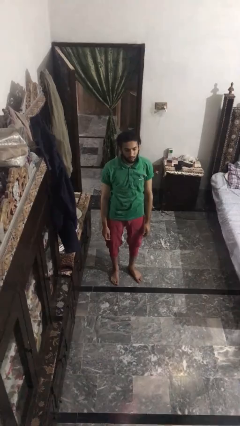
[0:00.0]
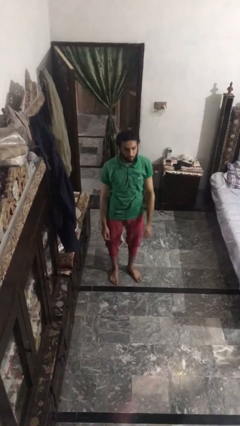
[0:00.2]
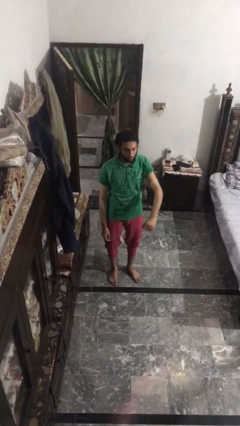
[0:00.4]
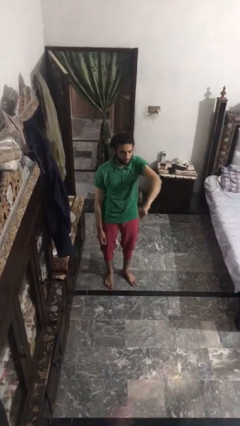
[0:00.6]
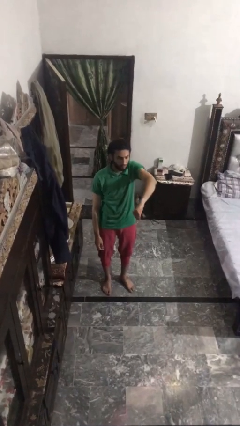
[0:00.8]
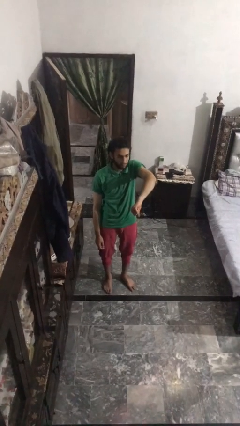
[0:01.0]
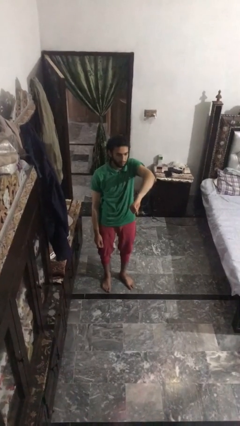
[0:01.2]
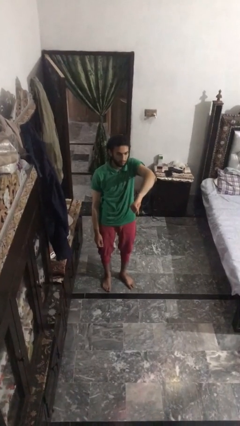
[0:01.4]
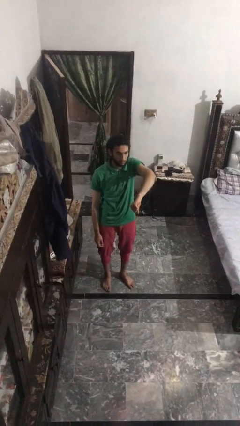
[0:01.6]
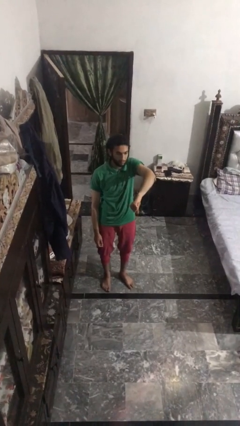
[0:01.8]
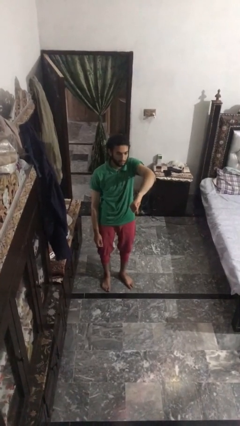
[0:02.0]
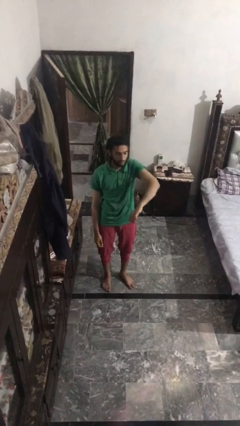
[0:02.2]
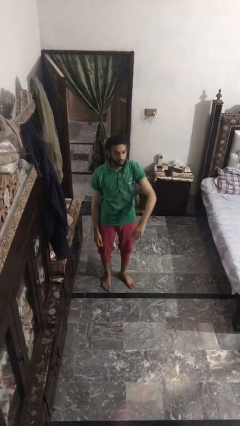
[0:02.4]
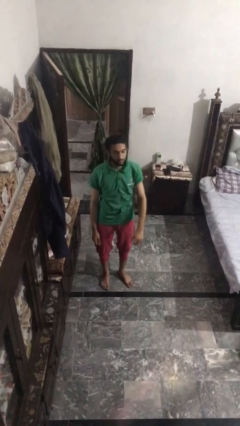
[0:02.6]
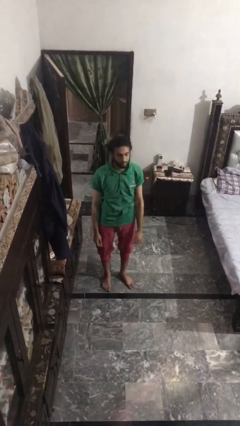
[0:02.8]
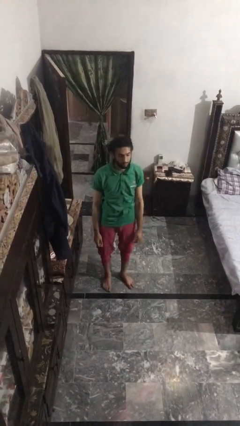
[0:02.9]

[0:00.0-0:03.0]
person gestures thumbs down

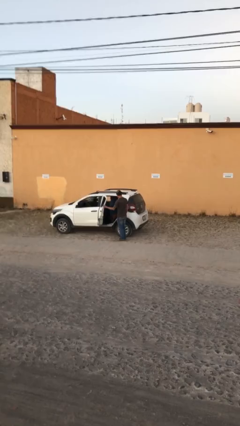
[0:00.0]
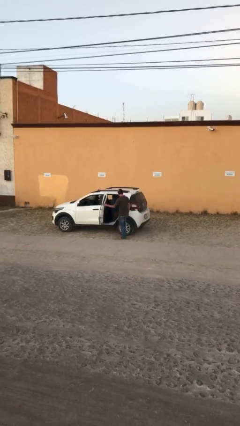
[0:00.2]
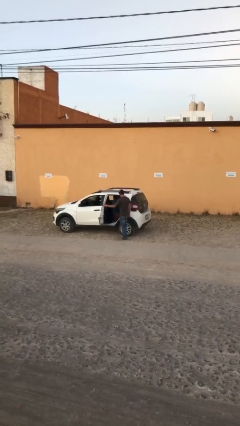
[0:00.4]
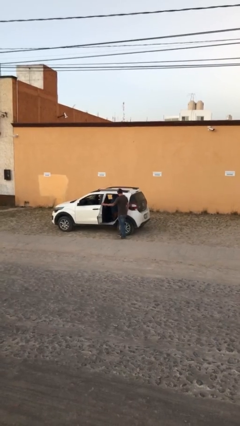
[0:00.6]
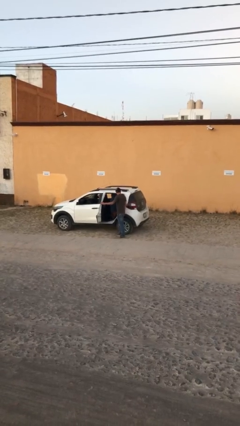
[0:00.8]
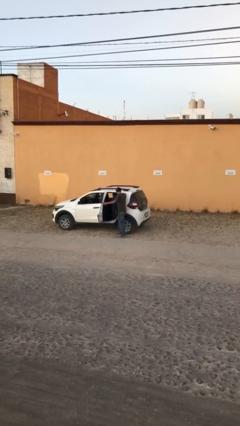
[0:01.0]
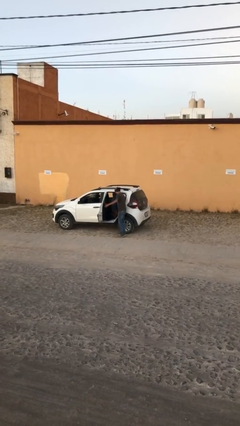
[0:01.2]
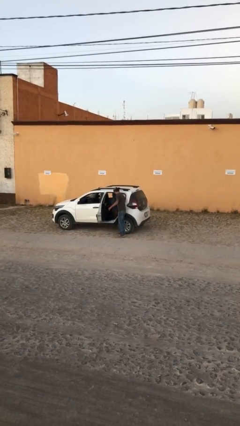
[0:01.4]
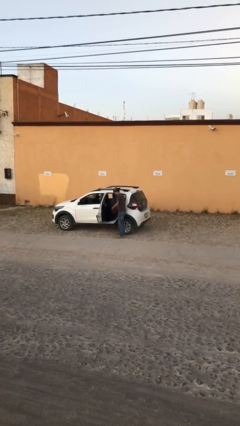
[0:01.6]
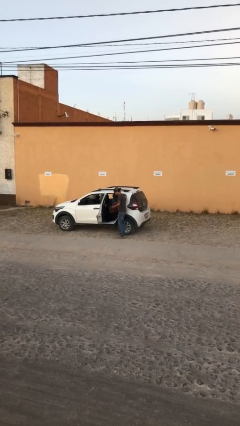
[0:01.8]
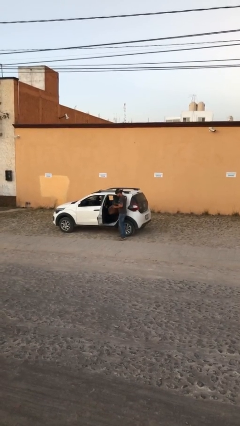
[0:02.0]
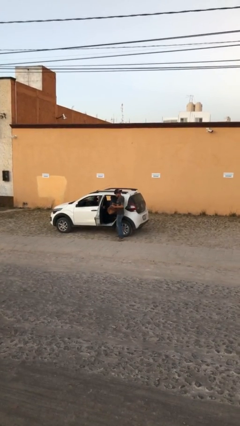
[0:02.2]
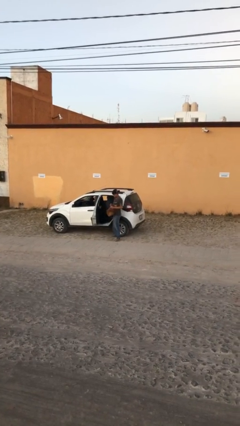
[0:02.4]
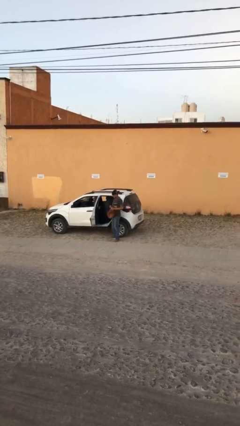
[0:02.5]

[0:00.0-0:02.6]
person unloads car

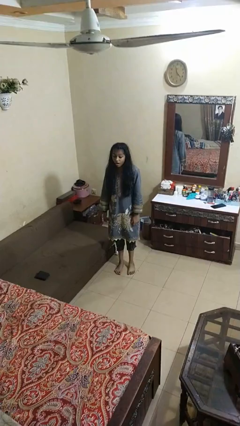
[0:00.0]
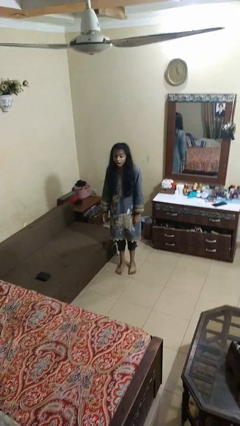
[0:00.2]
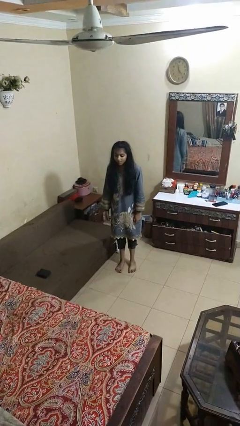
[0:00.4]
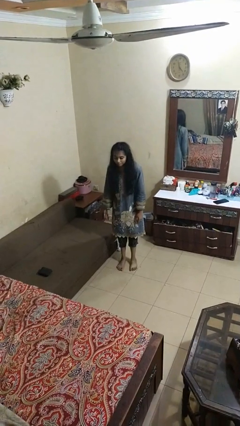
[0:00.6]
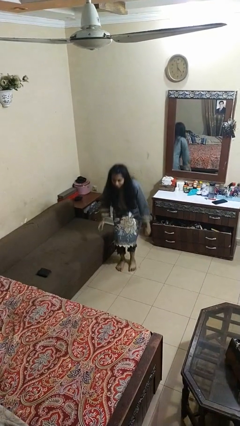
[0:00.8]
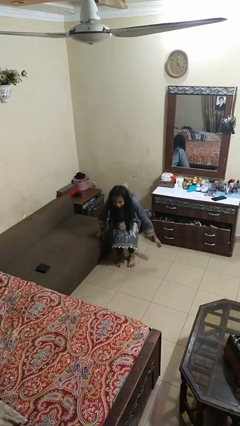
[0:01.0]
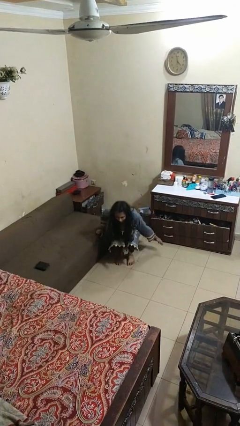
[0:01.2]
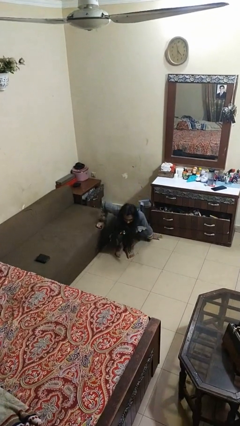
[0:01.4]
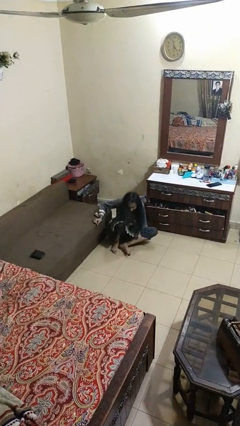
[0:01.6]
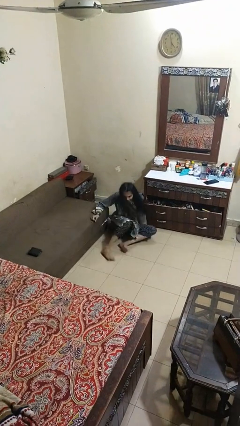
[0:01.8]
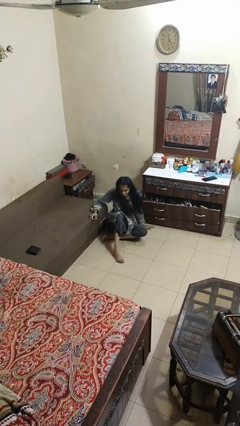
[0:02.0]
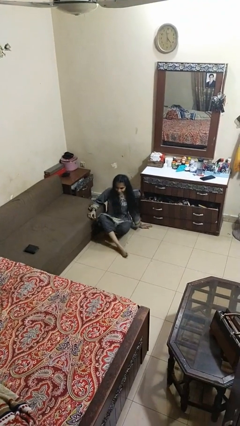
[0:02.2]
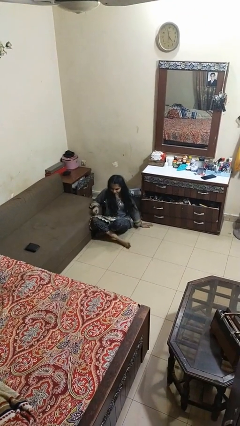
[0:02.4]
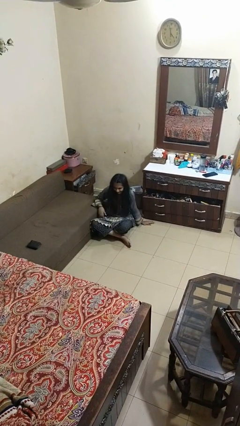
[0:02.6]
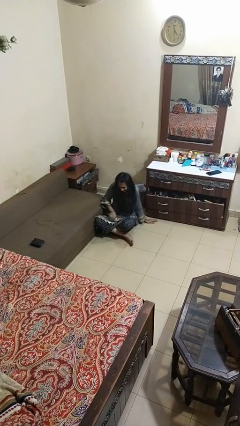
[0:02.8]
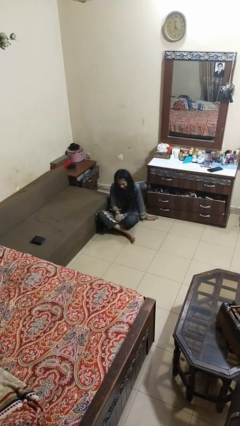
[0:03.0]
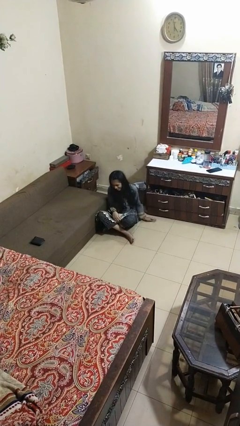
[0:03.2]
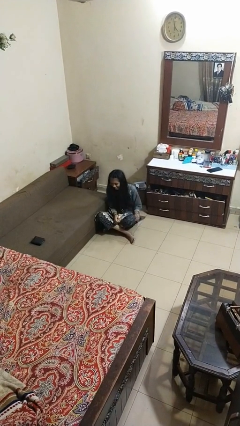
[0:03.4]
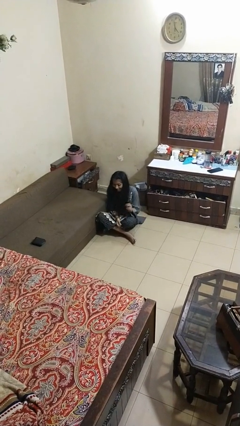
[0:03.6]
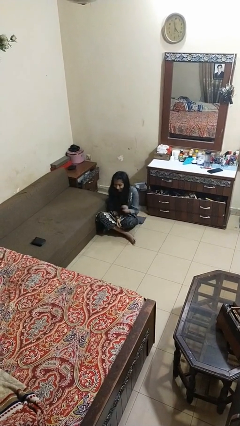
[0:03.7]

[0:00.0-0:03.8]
person sits crisscross

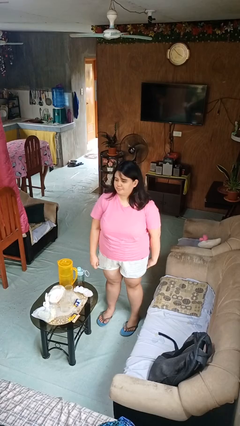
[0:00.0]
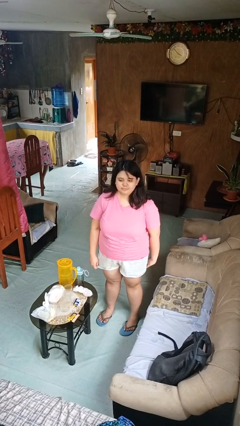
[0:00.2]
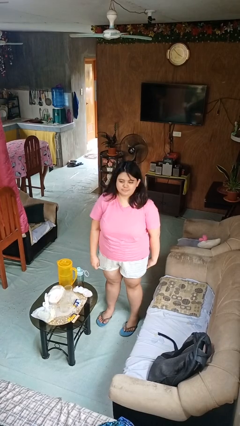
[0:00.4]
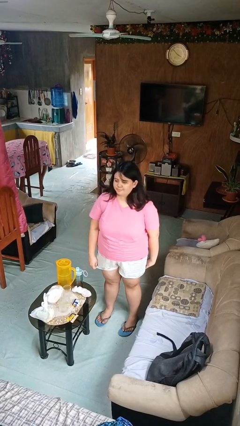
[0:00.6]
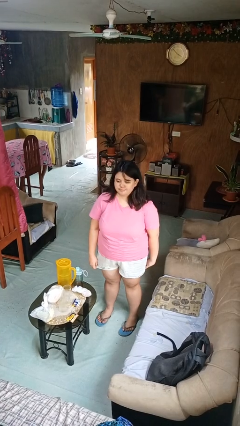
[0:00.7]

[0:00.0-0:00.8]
person shakes head

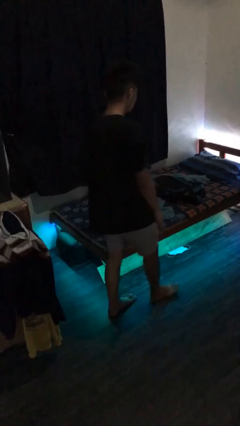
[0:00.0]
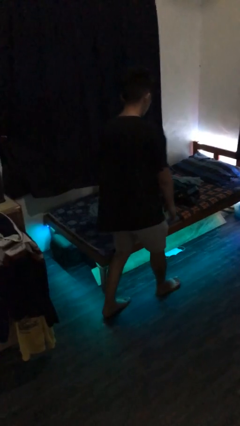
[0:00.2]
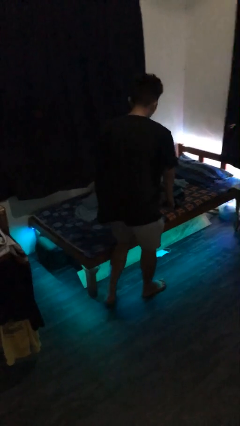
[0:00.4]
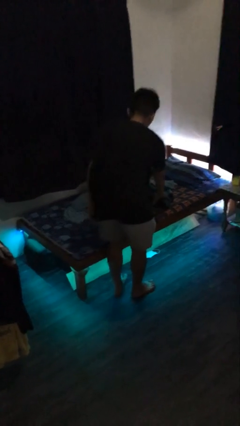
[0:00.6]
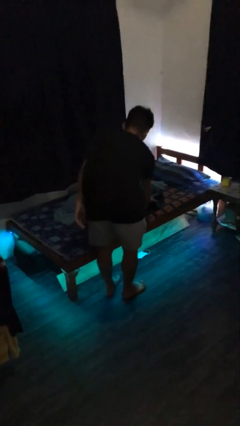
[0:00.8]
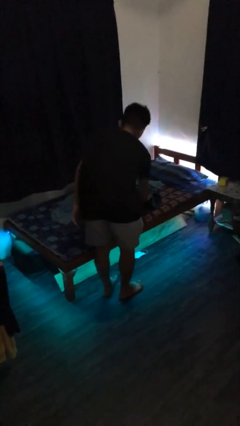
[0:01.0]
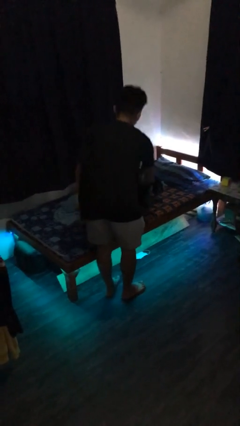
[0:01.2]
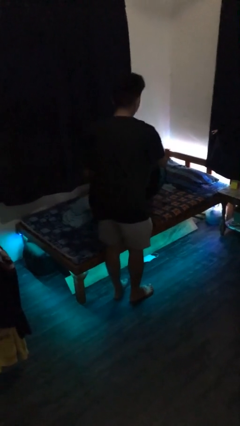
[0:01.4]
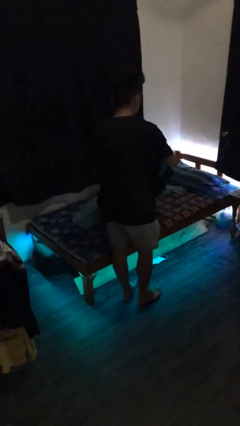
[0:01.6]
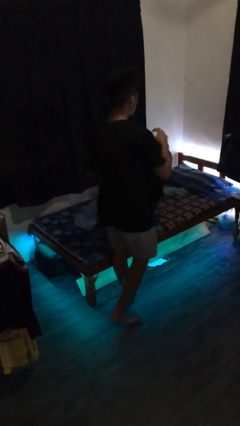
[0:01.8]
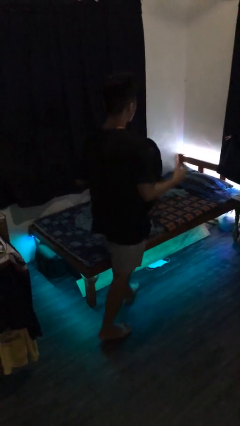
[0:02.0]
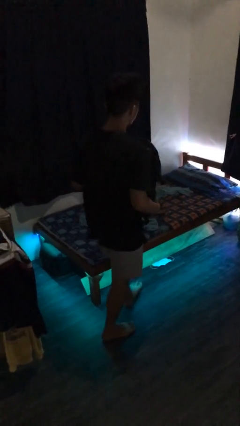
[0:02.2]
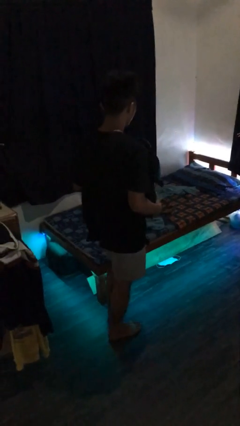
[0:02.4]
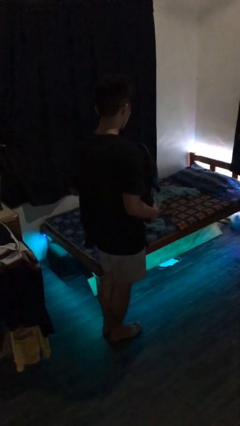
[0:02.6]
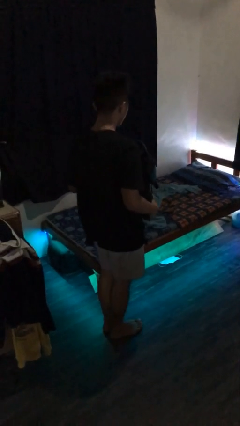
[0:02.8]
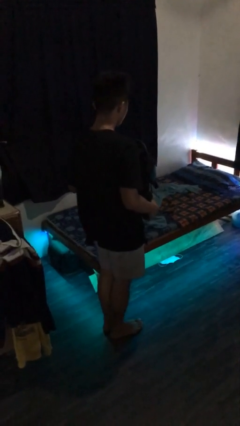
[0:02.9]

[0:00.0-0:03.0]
person picks up object from bed

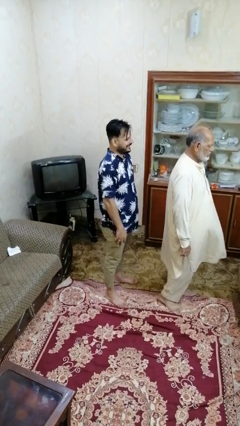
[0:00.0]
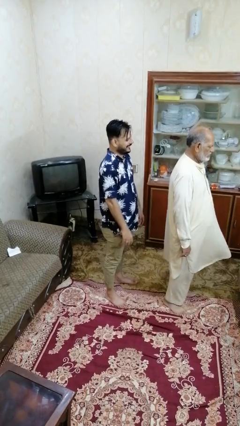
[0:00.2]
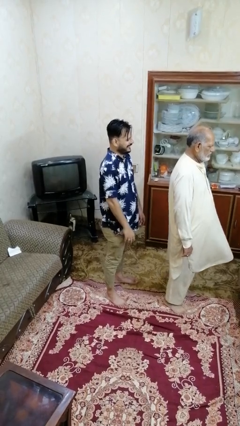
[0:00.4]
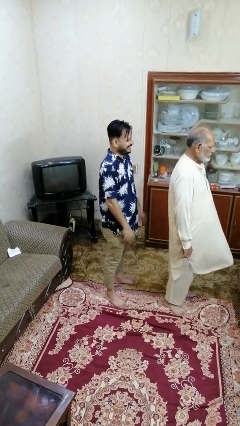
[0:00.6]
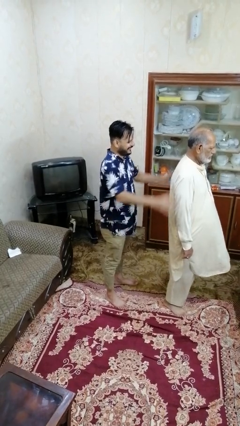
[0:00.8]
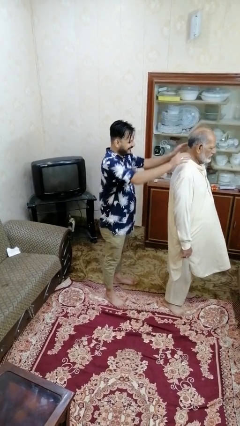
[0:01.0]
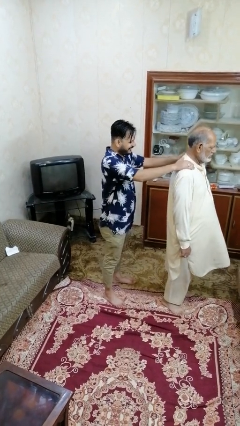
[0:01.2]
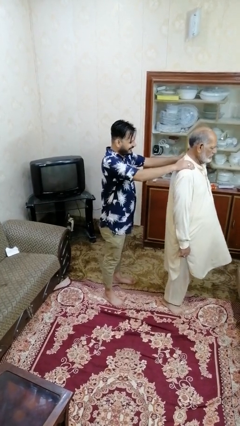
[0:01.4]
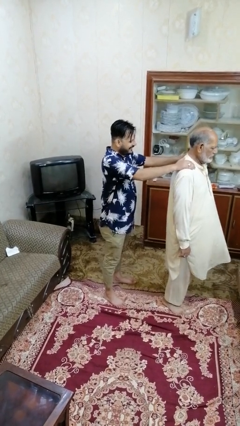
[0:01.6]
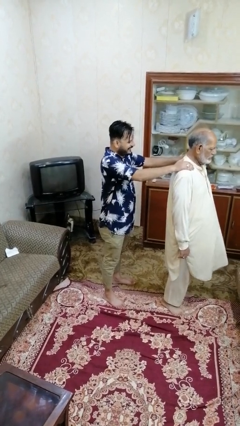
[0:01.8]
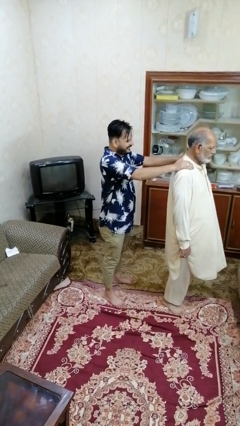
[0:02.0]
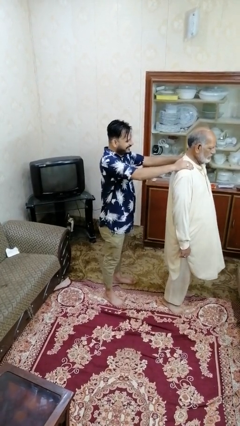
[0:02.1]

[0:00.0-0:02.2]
person grabs person by shoulder

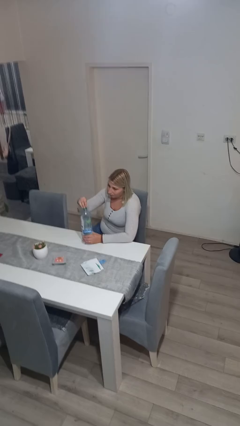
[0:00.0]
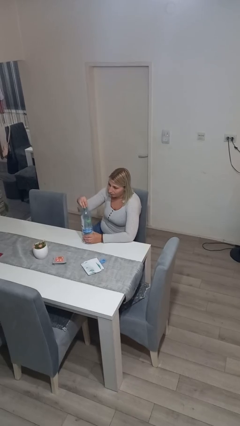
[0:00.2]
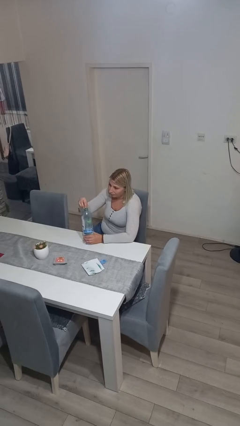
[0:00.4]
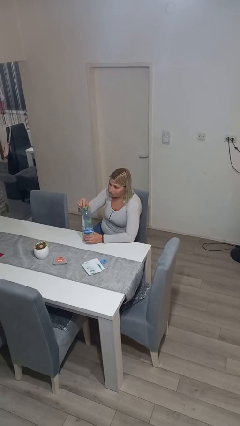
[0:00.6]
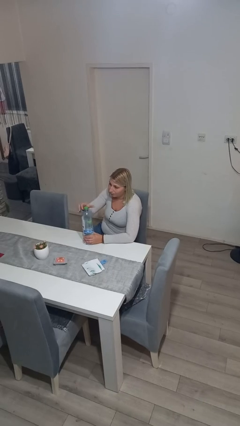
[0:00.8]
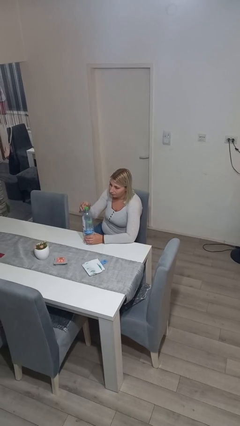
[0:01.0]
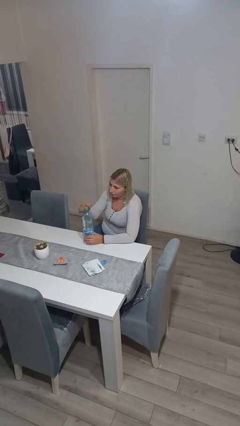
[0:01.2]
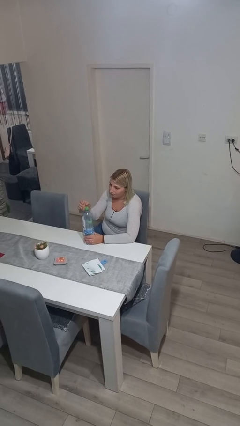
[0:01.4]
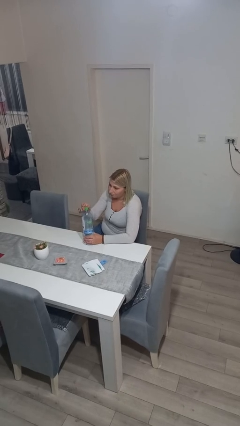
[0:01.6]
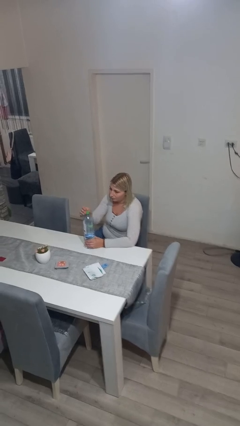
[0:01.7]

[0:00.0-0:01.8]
person screws lid to bottle
